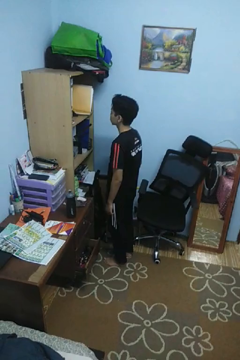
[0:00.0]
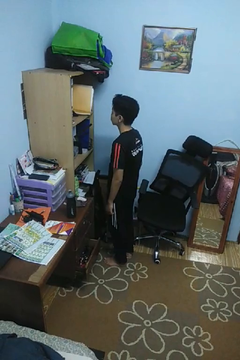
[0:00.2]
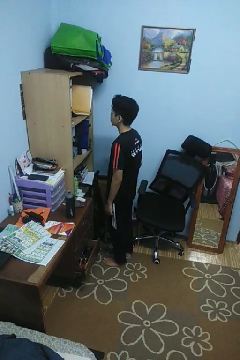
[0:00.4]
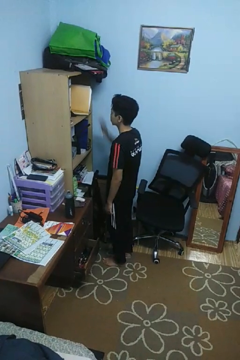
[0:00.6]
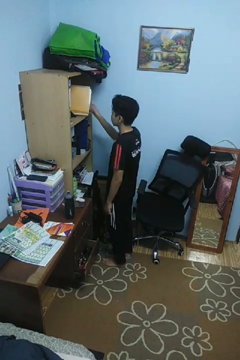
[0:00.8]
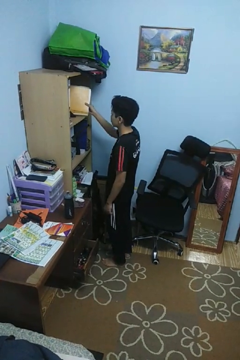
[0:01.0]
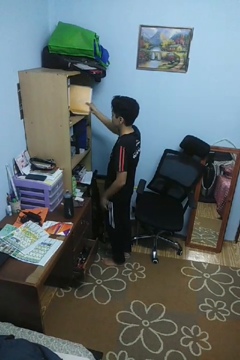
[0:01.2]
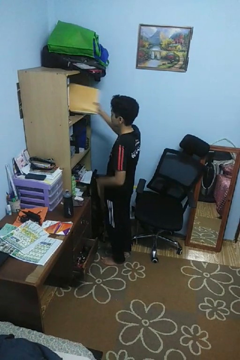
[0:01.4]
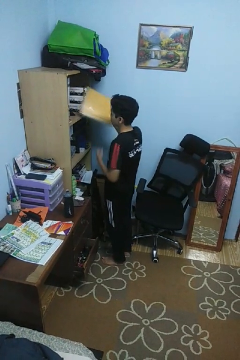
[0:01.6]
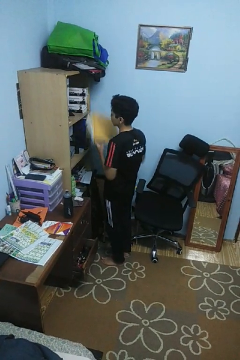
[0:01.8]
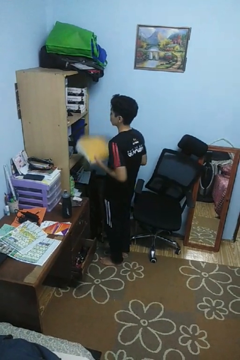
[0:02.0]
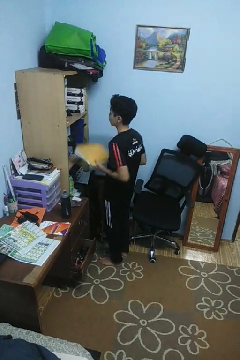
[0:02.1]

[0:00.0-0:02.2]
person picks up object from cabinet

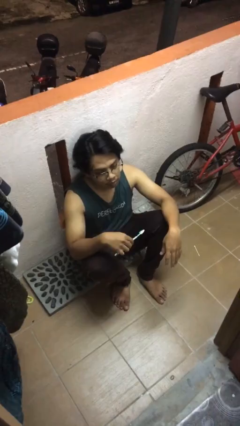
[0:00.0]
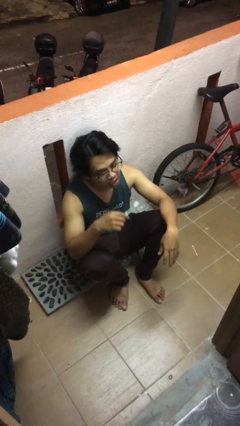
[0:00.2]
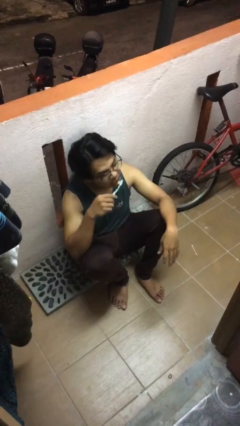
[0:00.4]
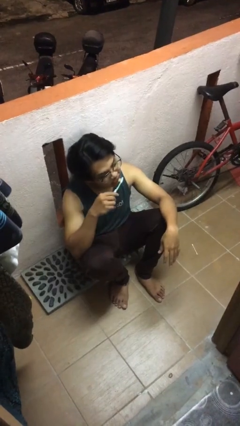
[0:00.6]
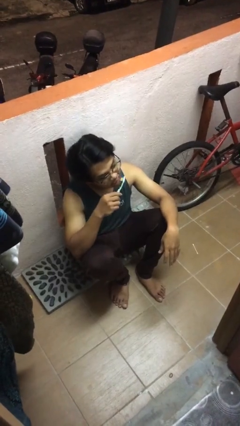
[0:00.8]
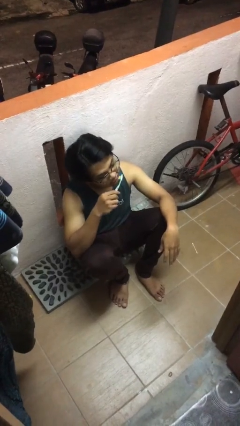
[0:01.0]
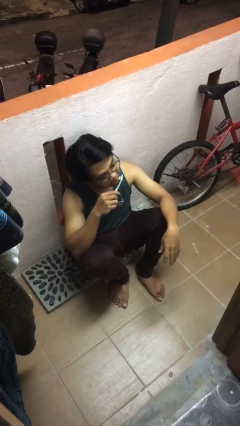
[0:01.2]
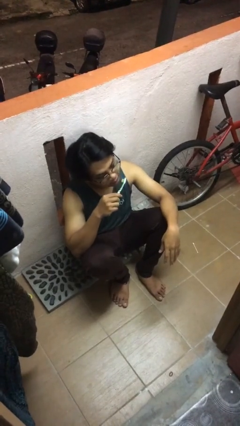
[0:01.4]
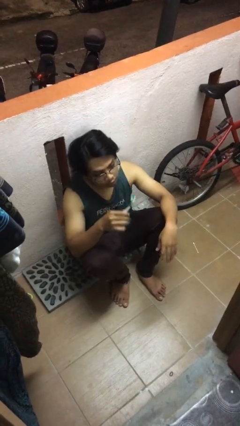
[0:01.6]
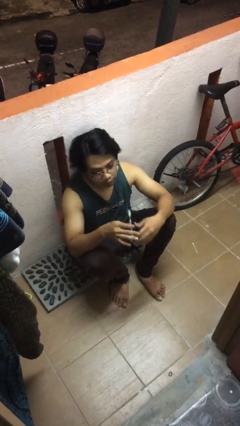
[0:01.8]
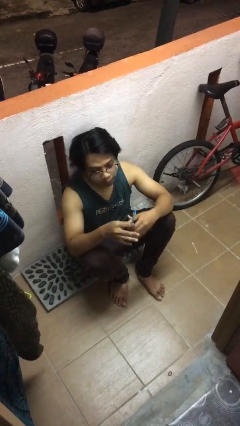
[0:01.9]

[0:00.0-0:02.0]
person brushes teeth

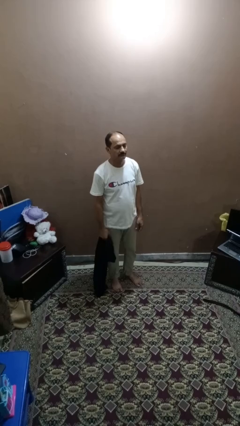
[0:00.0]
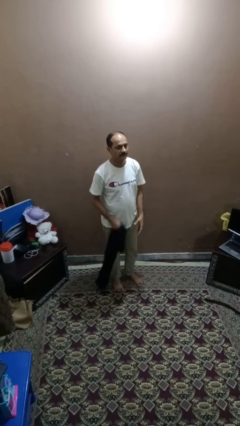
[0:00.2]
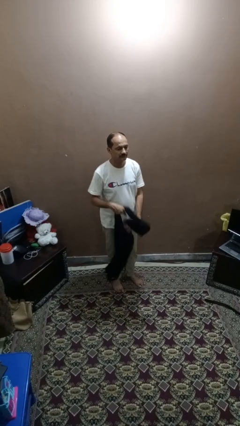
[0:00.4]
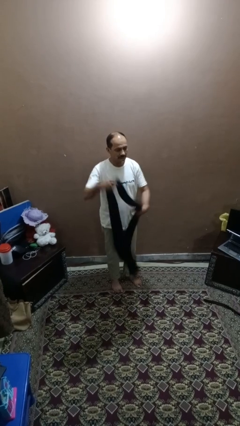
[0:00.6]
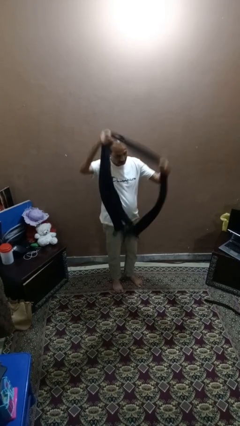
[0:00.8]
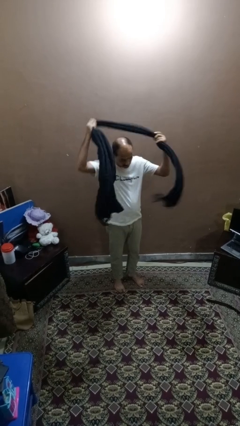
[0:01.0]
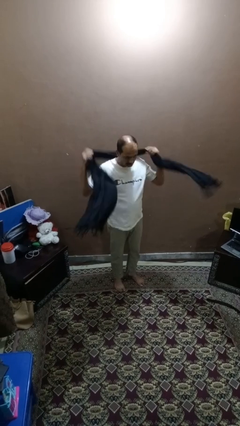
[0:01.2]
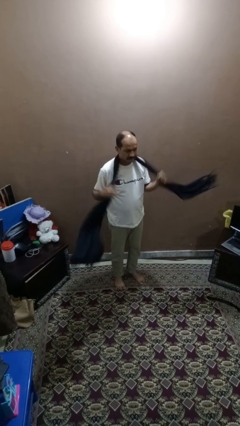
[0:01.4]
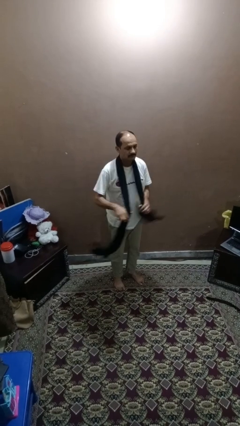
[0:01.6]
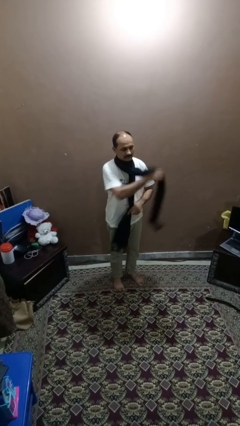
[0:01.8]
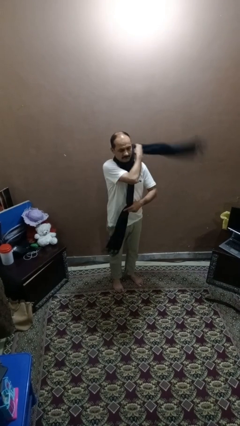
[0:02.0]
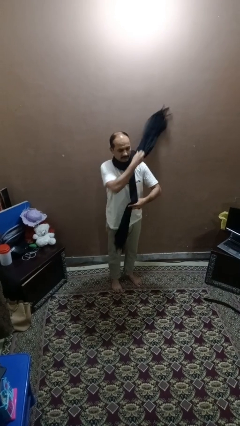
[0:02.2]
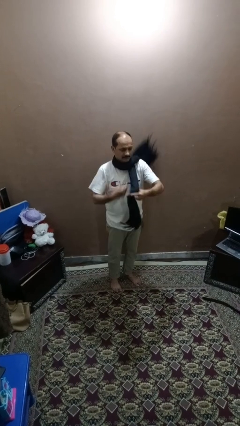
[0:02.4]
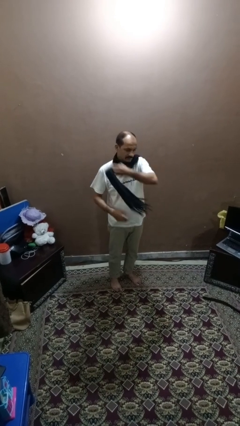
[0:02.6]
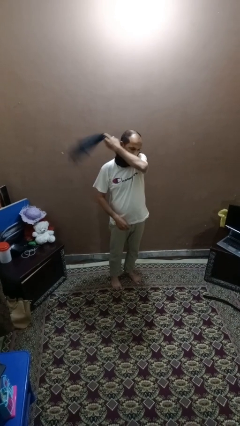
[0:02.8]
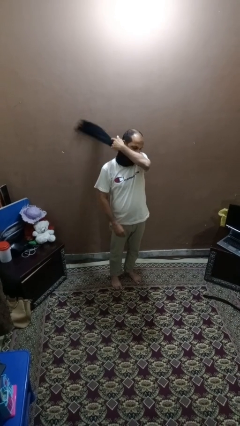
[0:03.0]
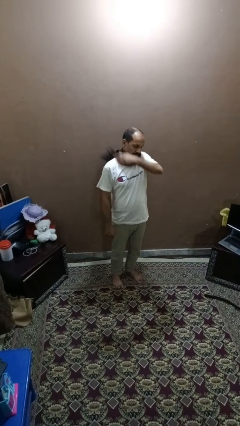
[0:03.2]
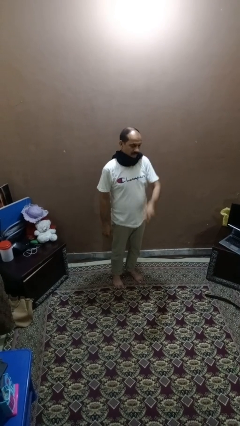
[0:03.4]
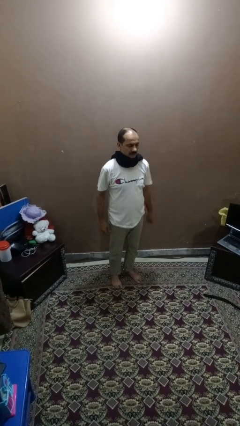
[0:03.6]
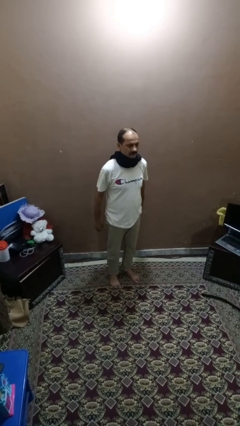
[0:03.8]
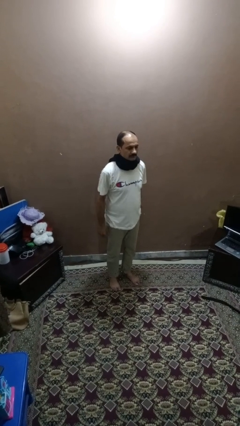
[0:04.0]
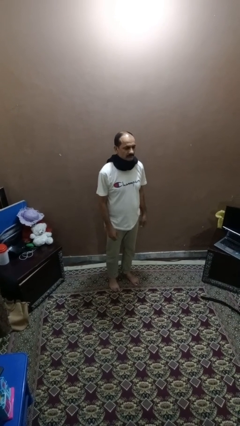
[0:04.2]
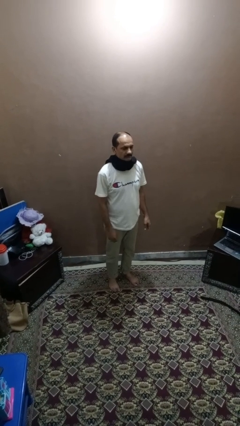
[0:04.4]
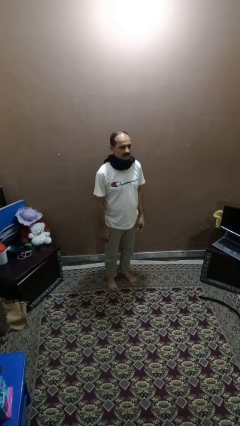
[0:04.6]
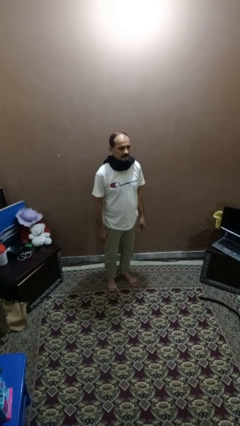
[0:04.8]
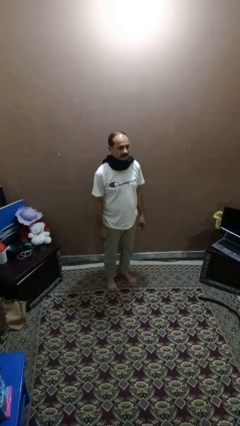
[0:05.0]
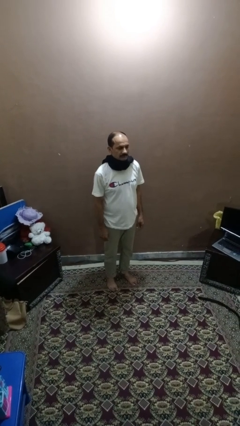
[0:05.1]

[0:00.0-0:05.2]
person puts on scarf

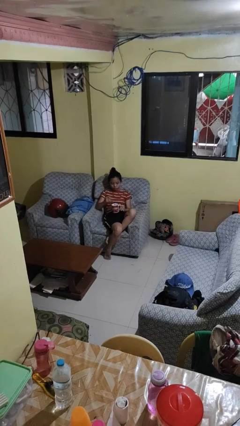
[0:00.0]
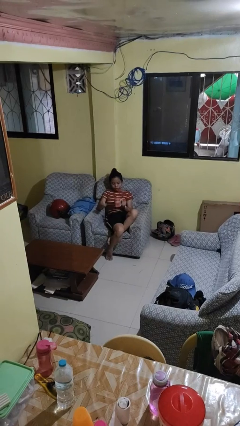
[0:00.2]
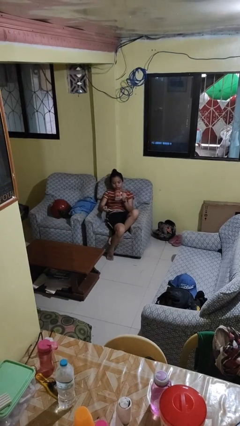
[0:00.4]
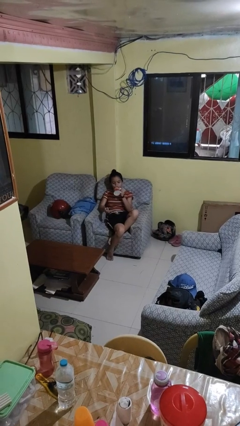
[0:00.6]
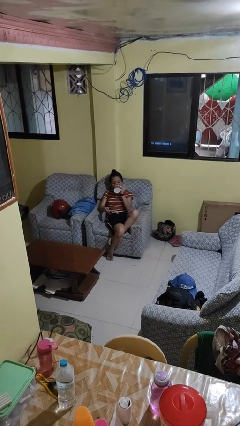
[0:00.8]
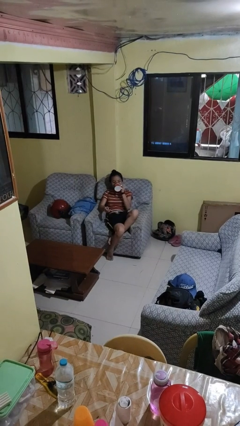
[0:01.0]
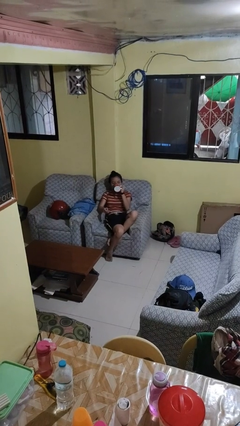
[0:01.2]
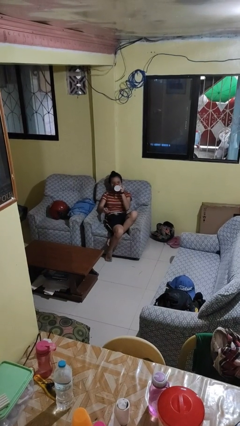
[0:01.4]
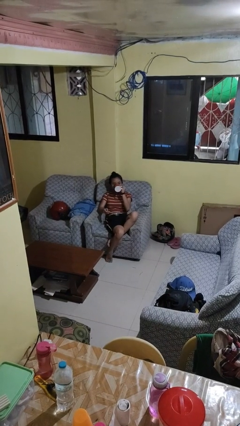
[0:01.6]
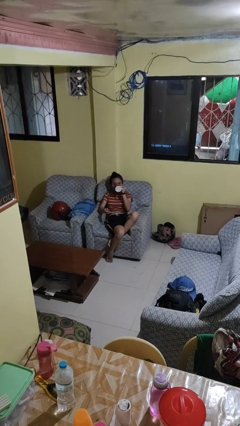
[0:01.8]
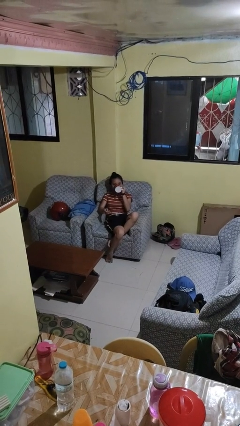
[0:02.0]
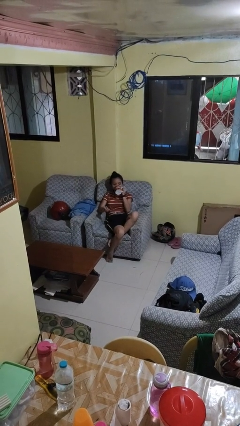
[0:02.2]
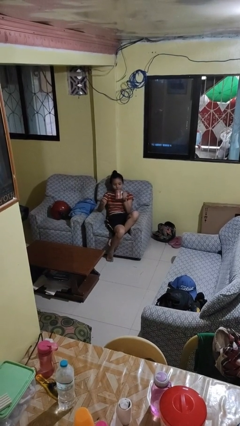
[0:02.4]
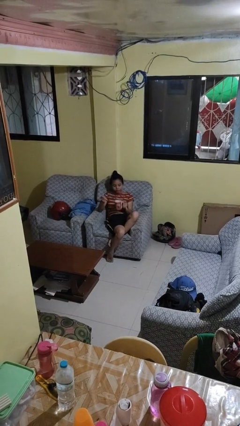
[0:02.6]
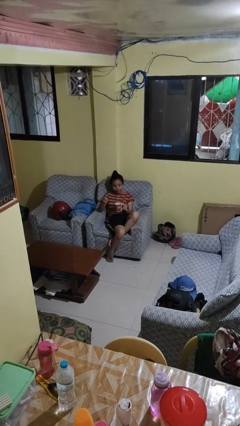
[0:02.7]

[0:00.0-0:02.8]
person drinks from mug

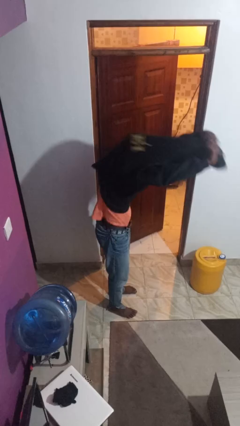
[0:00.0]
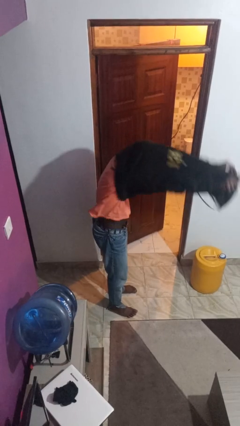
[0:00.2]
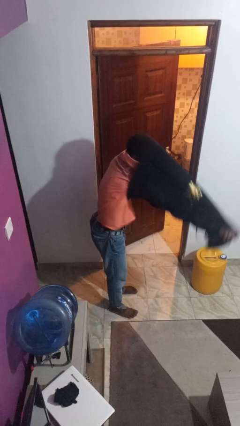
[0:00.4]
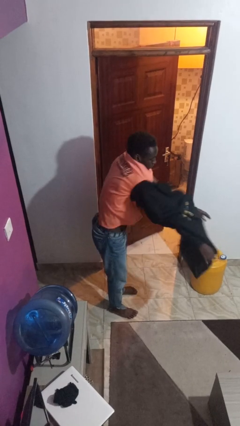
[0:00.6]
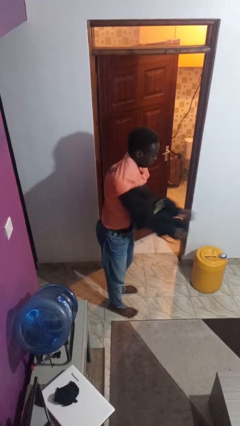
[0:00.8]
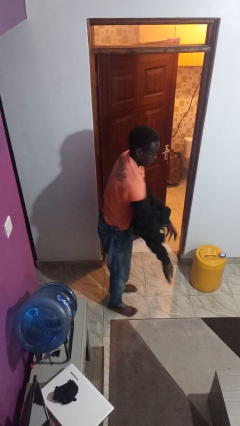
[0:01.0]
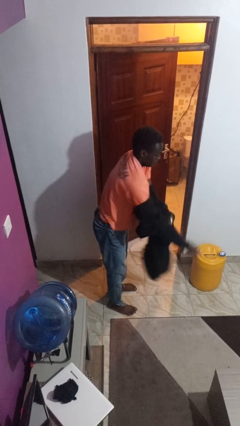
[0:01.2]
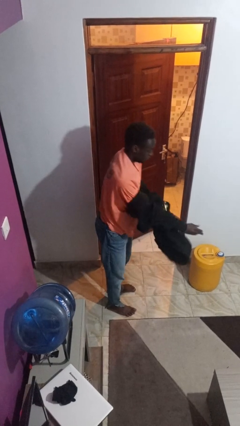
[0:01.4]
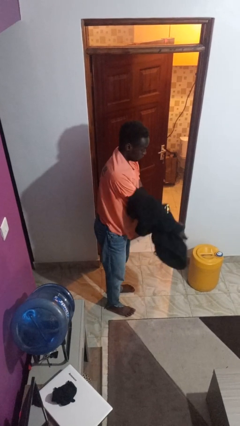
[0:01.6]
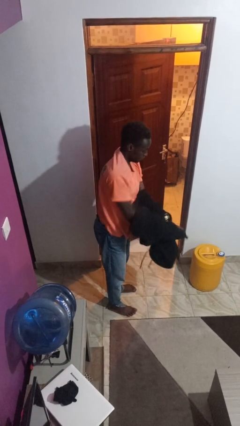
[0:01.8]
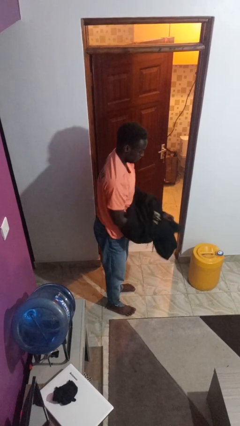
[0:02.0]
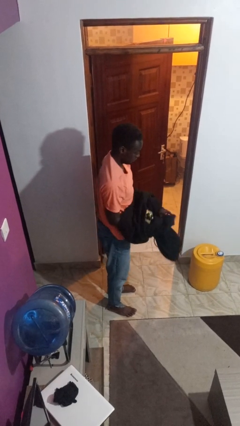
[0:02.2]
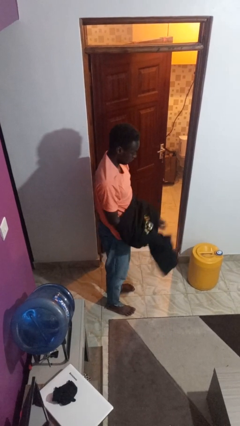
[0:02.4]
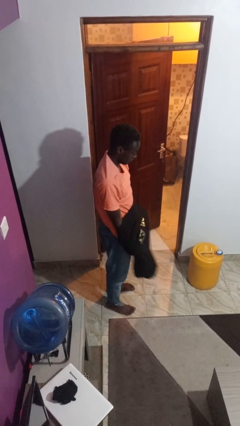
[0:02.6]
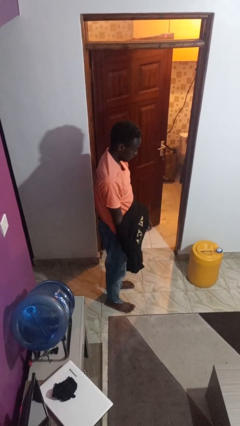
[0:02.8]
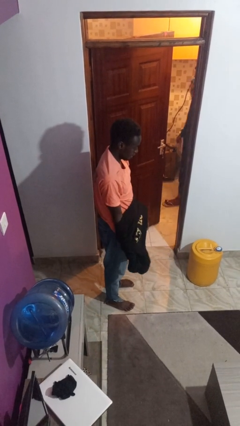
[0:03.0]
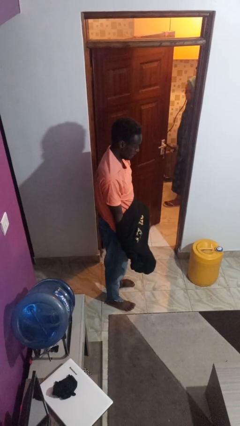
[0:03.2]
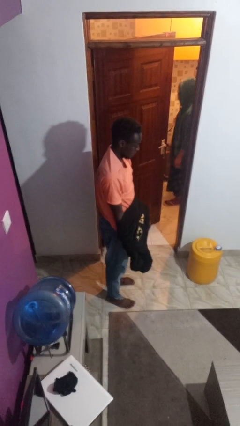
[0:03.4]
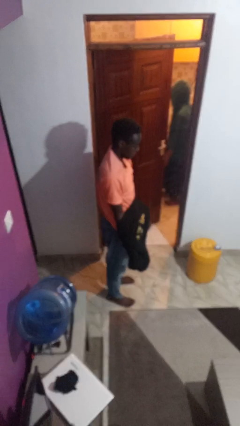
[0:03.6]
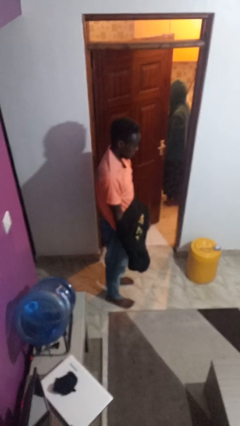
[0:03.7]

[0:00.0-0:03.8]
person takes off hoodie

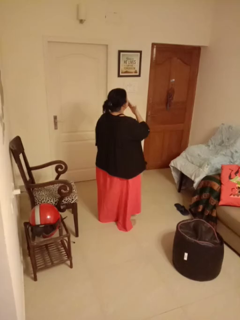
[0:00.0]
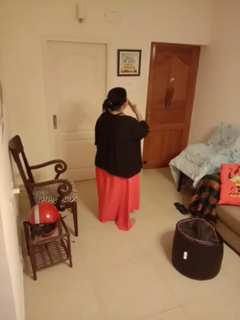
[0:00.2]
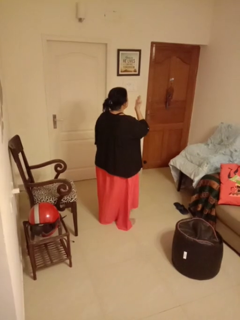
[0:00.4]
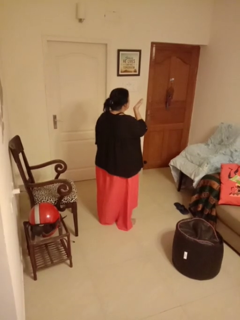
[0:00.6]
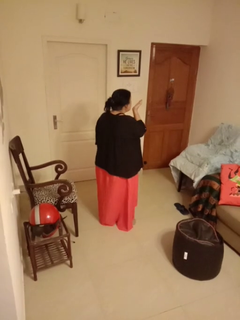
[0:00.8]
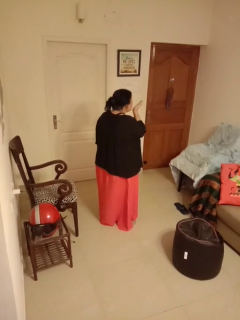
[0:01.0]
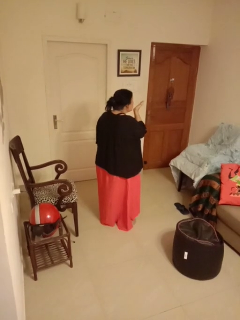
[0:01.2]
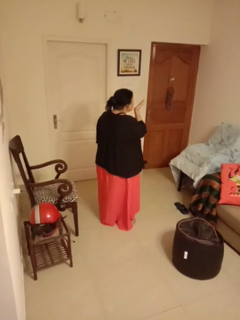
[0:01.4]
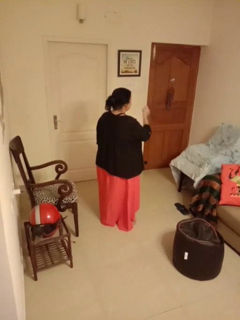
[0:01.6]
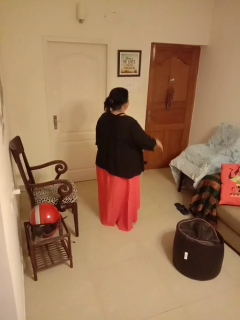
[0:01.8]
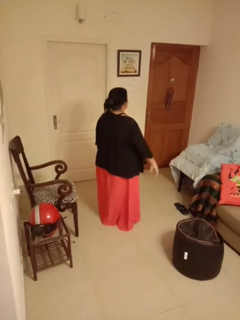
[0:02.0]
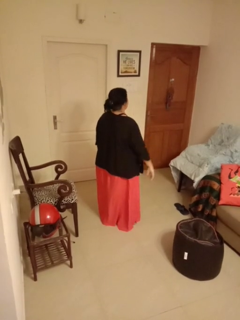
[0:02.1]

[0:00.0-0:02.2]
person gestures blow kiss

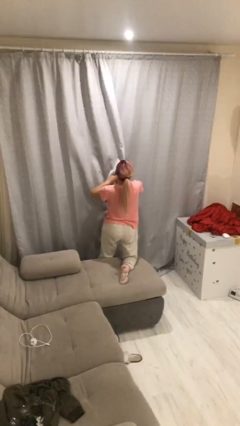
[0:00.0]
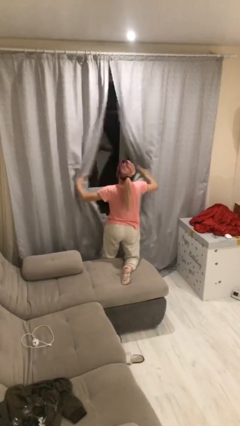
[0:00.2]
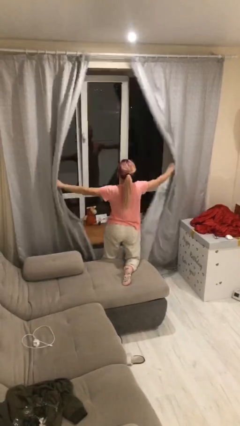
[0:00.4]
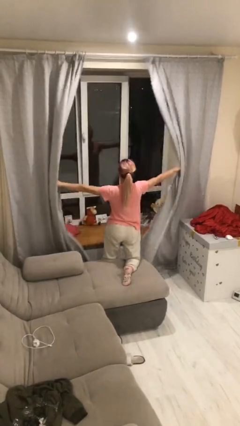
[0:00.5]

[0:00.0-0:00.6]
person opens curtains
